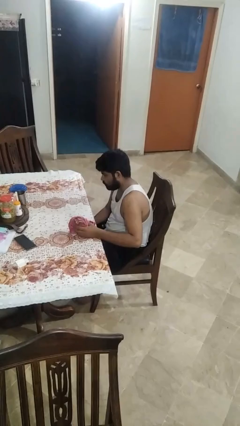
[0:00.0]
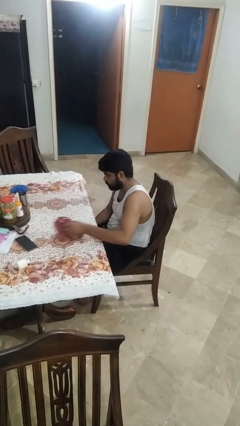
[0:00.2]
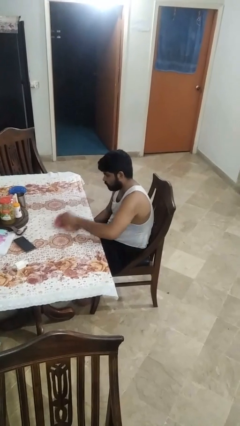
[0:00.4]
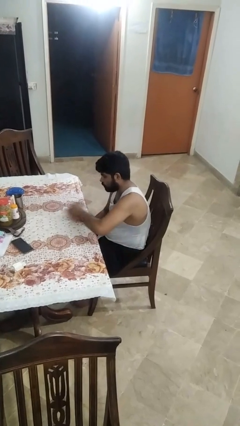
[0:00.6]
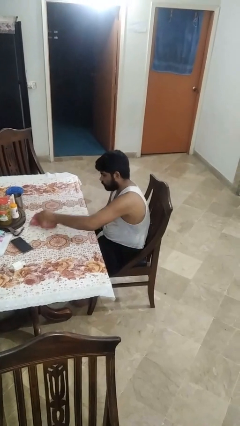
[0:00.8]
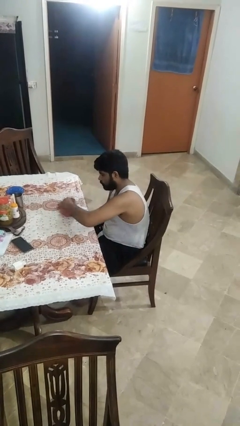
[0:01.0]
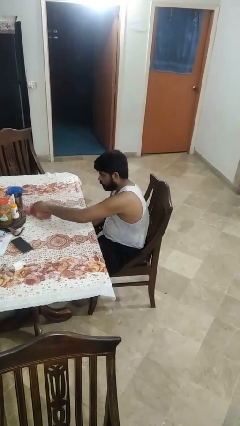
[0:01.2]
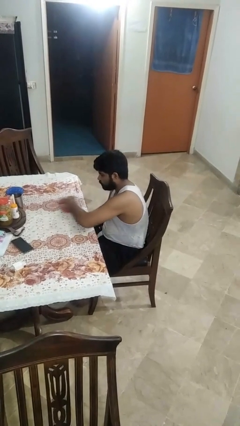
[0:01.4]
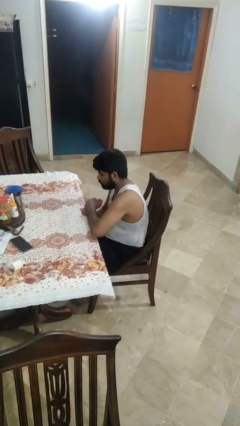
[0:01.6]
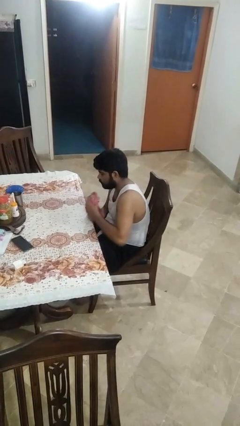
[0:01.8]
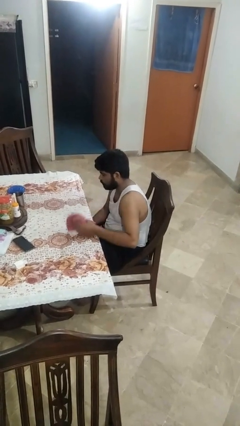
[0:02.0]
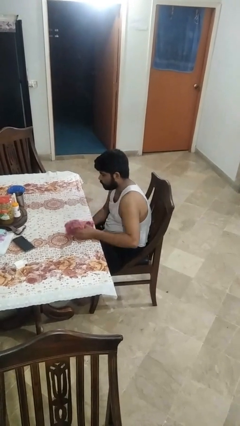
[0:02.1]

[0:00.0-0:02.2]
person cleans table with rag

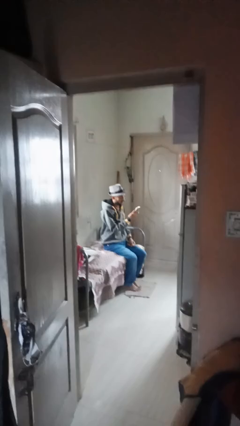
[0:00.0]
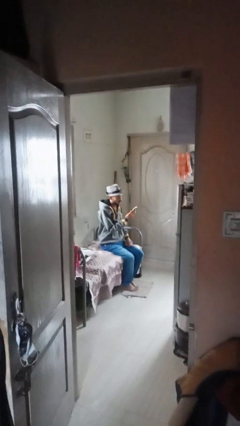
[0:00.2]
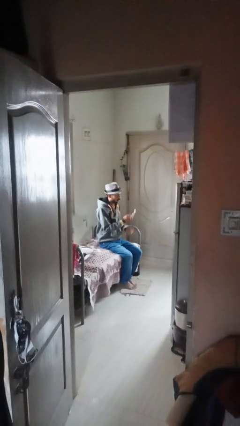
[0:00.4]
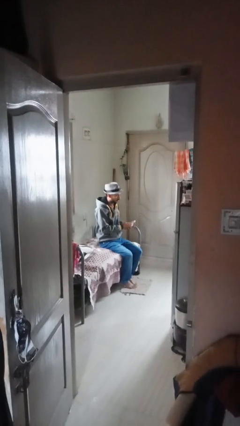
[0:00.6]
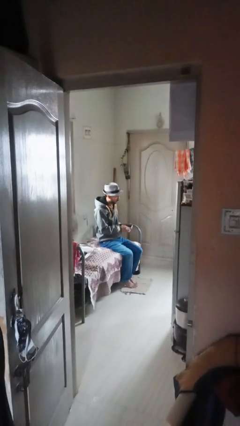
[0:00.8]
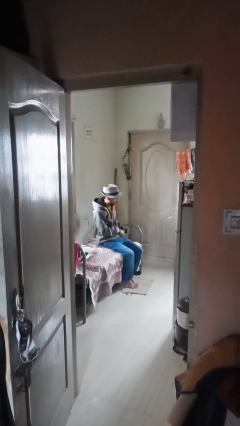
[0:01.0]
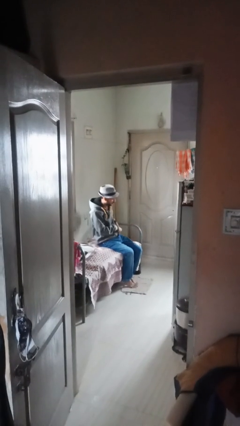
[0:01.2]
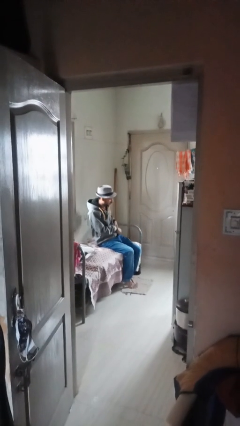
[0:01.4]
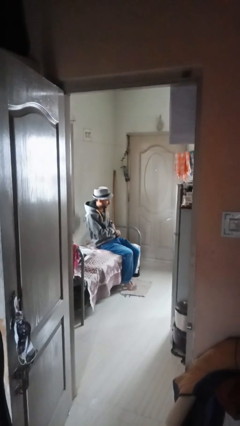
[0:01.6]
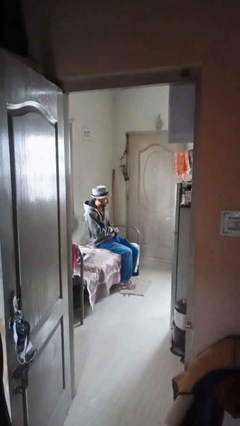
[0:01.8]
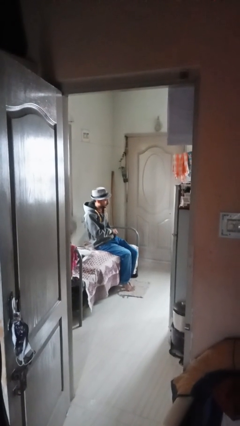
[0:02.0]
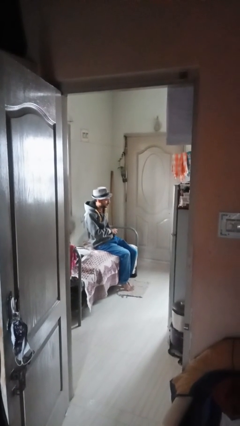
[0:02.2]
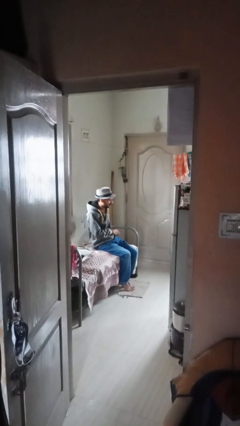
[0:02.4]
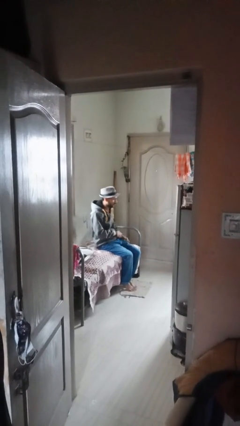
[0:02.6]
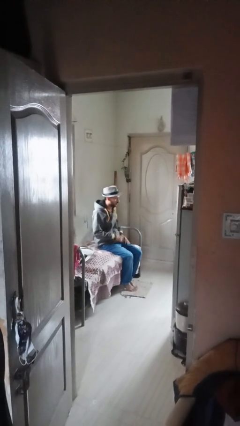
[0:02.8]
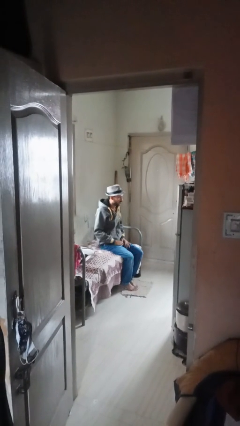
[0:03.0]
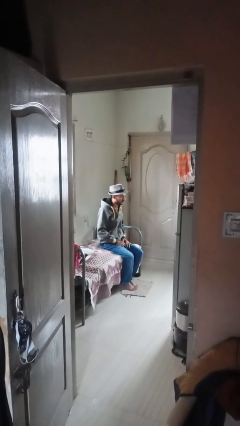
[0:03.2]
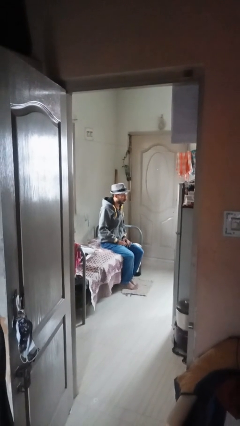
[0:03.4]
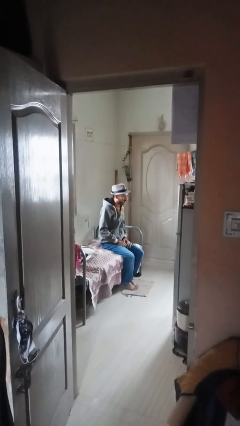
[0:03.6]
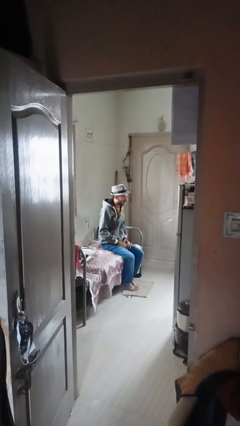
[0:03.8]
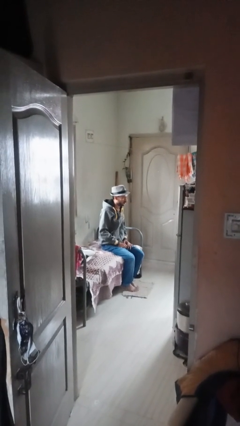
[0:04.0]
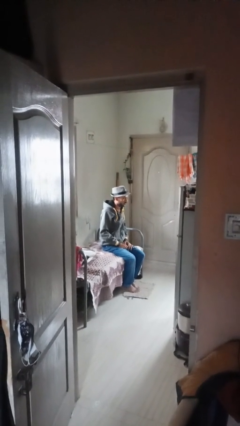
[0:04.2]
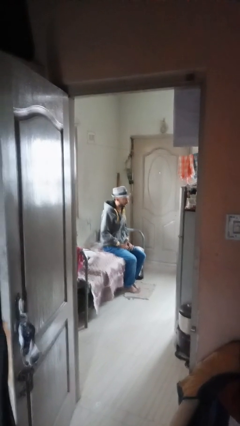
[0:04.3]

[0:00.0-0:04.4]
person puts phone into pocket

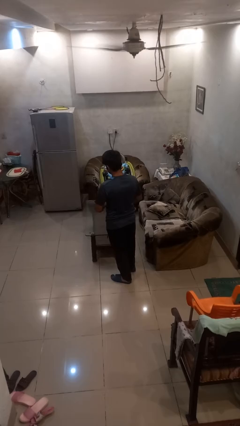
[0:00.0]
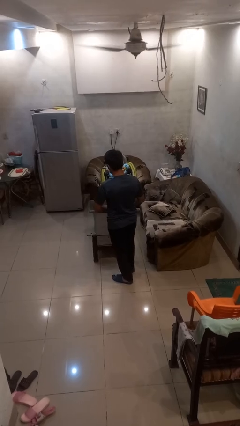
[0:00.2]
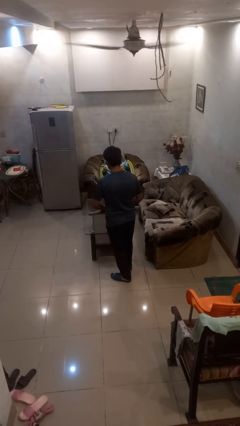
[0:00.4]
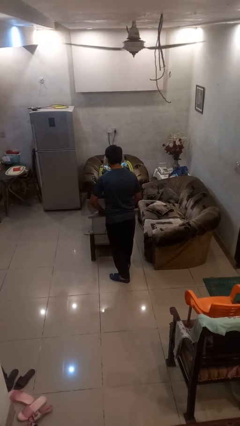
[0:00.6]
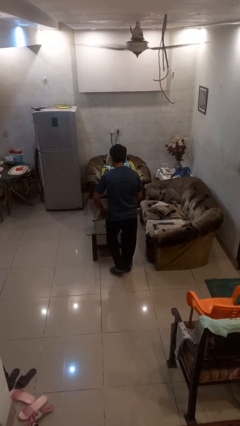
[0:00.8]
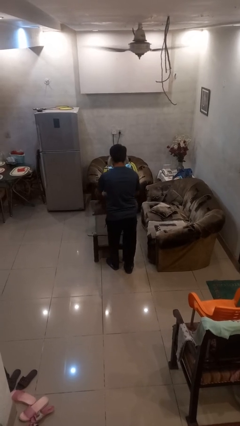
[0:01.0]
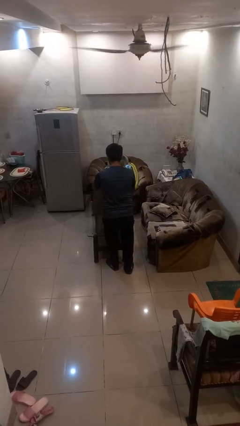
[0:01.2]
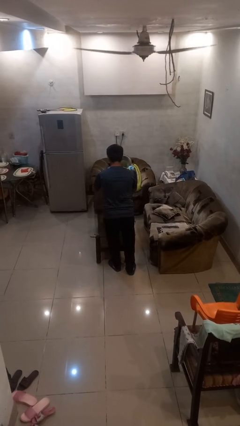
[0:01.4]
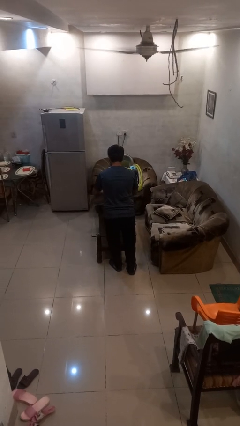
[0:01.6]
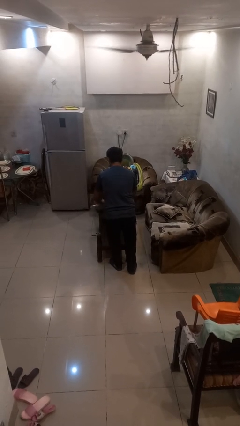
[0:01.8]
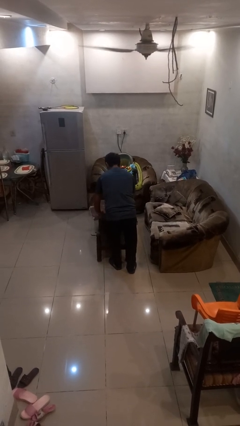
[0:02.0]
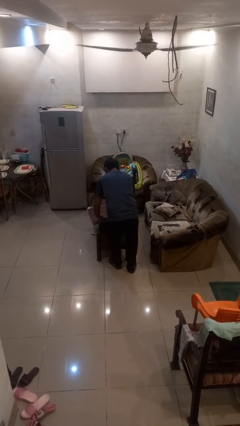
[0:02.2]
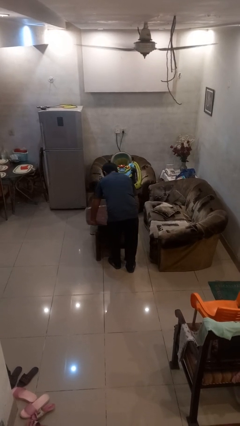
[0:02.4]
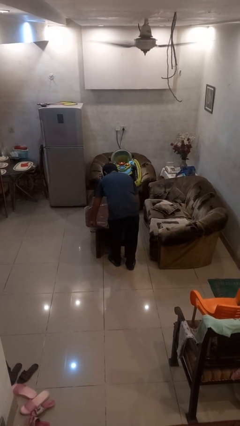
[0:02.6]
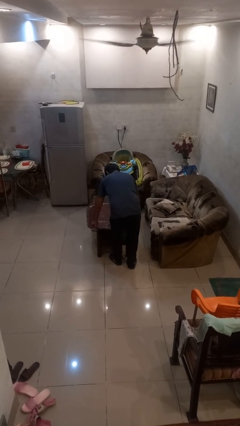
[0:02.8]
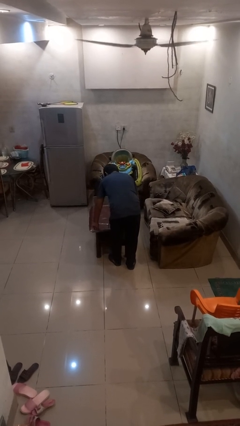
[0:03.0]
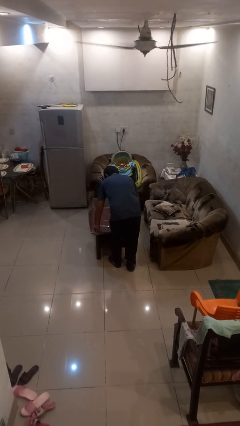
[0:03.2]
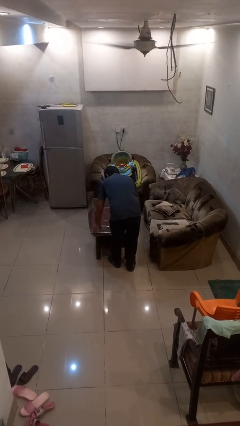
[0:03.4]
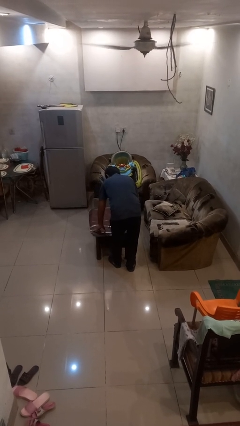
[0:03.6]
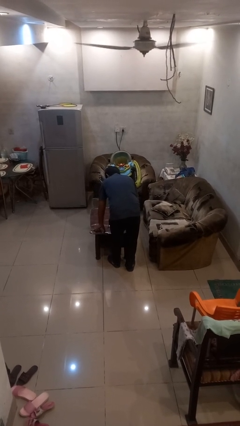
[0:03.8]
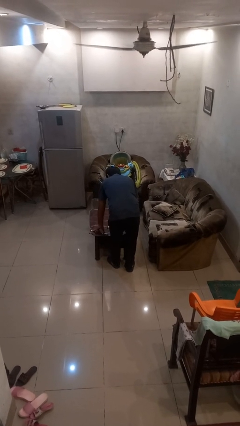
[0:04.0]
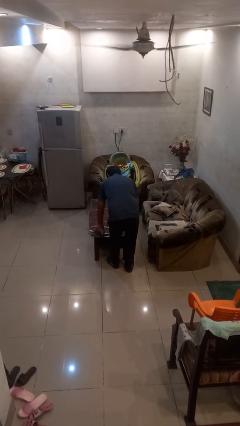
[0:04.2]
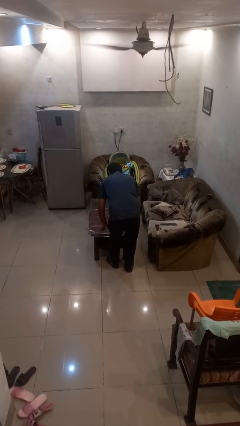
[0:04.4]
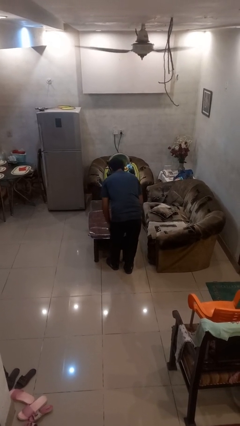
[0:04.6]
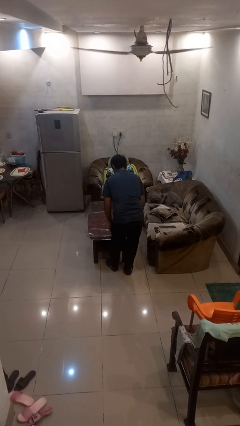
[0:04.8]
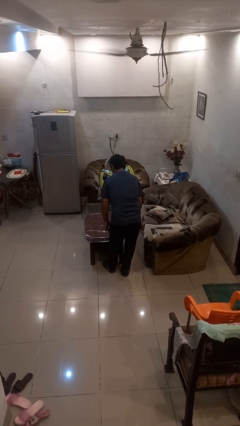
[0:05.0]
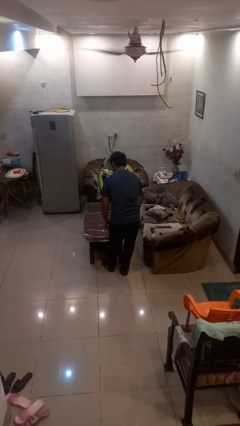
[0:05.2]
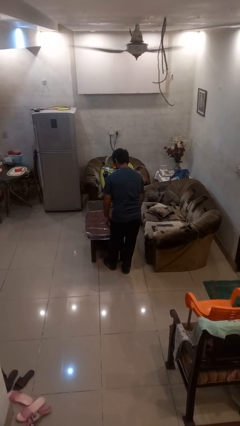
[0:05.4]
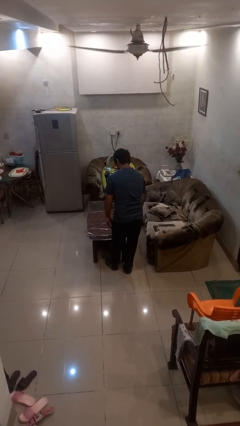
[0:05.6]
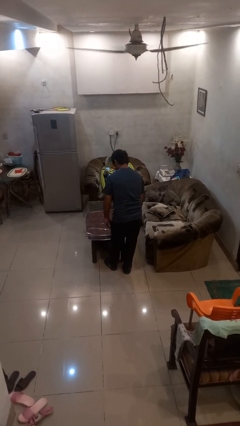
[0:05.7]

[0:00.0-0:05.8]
person spreads tablecloth

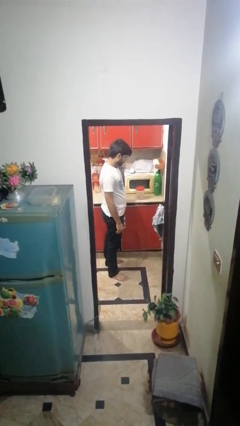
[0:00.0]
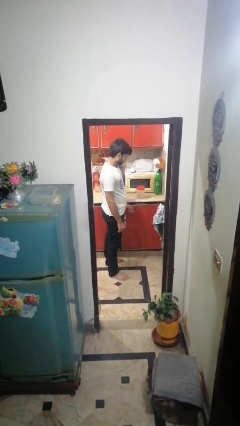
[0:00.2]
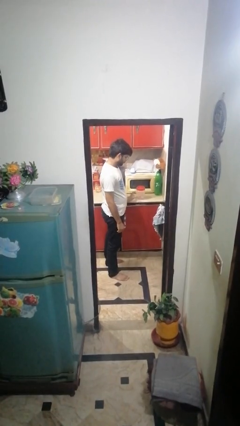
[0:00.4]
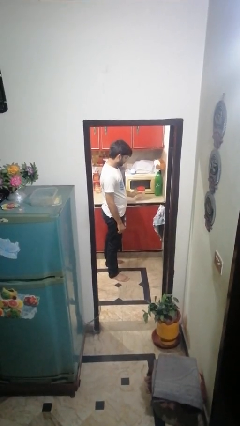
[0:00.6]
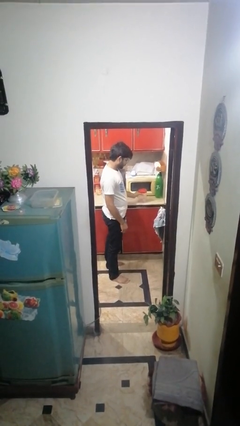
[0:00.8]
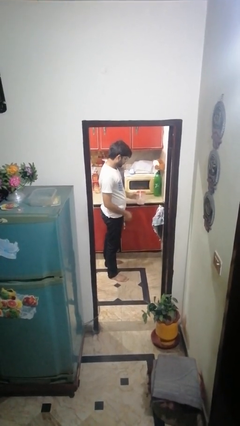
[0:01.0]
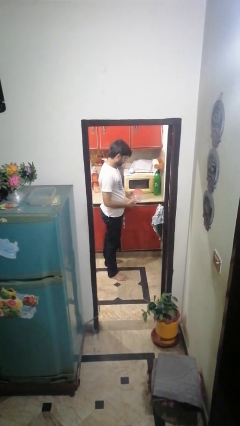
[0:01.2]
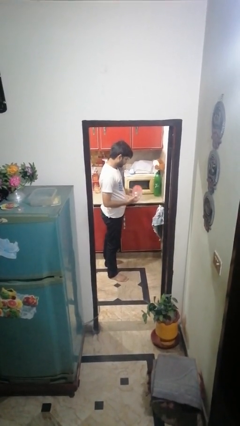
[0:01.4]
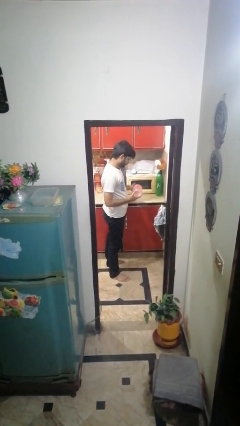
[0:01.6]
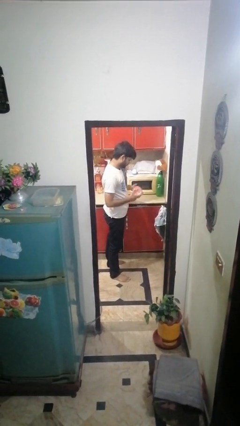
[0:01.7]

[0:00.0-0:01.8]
person picks up object from countertop

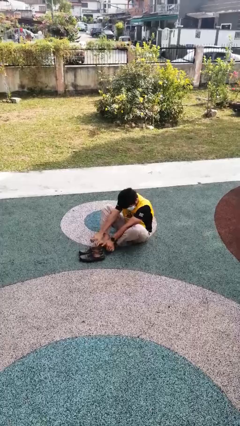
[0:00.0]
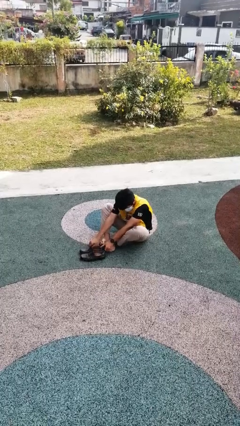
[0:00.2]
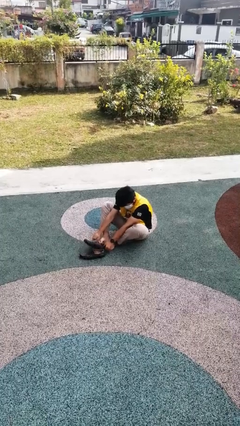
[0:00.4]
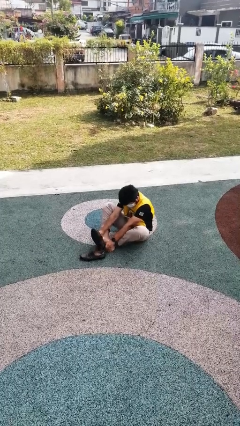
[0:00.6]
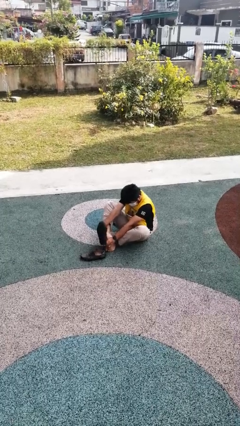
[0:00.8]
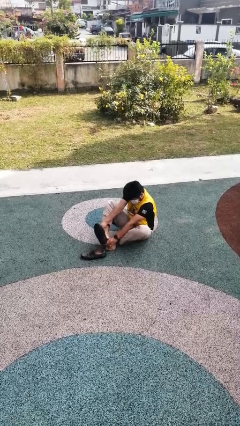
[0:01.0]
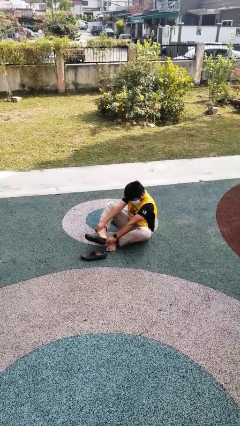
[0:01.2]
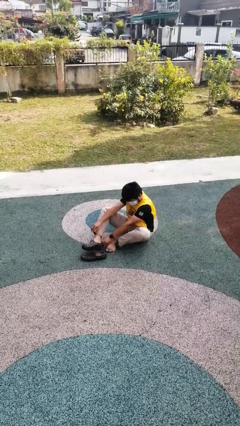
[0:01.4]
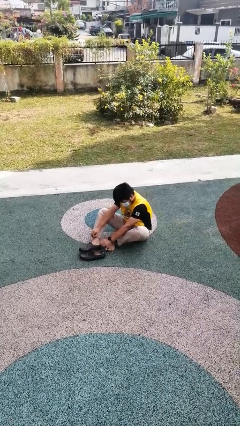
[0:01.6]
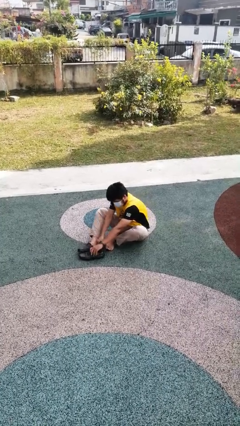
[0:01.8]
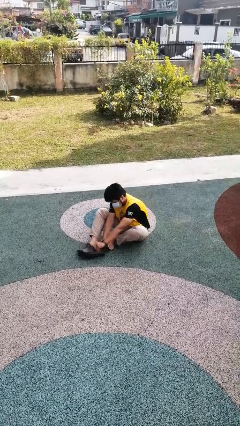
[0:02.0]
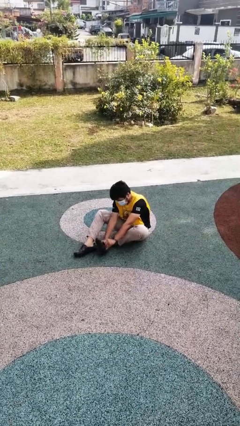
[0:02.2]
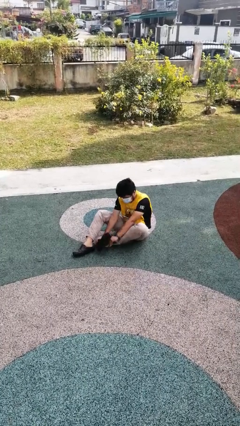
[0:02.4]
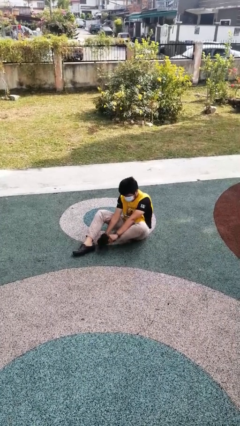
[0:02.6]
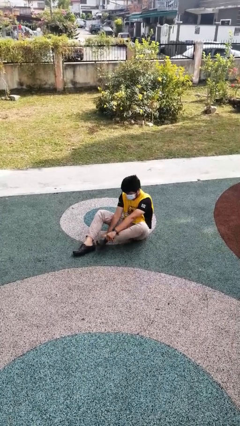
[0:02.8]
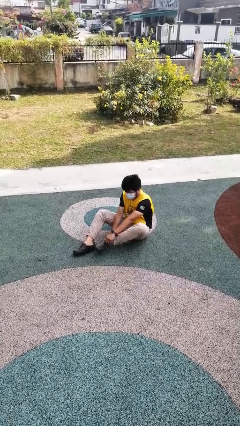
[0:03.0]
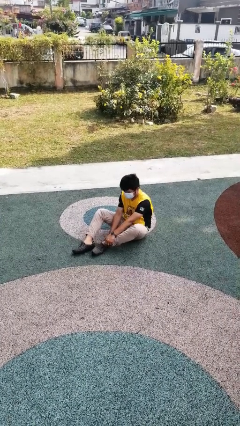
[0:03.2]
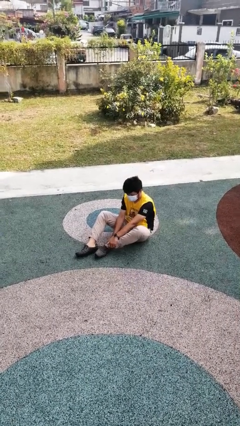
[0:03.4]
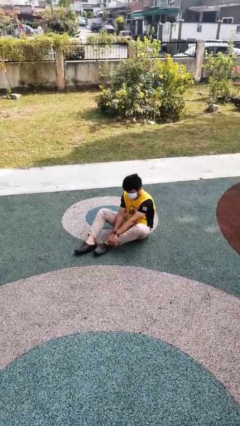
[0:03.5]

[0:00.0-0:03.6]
person puts on shoes
